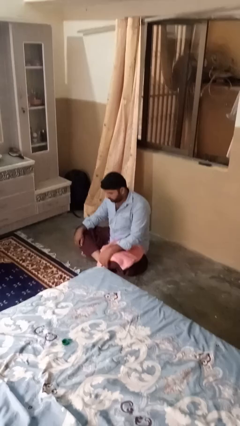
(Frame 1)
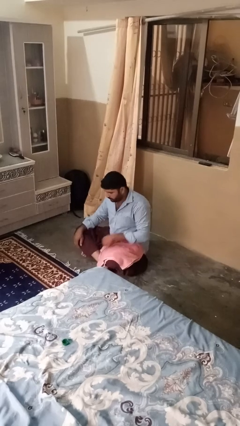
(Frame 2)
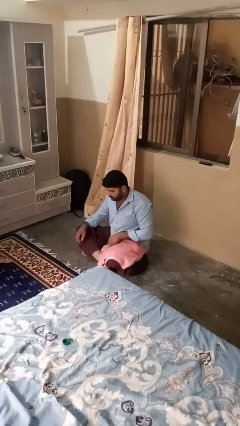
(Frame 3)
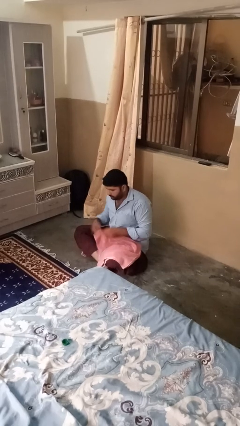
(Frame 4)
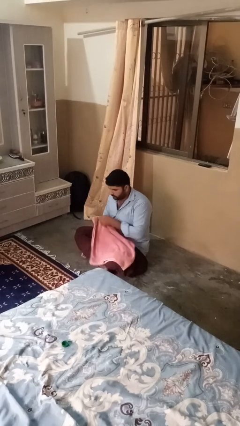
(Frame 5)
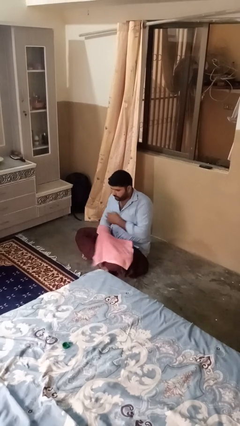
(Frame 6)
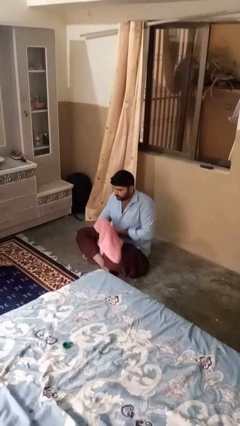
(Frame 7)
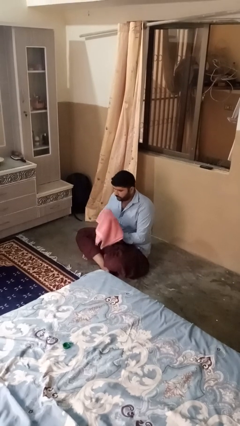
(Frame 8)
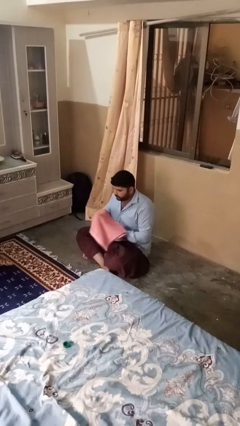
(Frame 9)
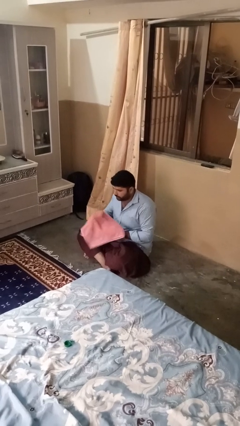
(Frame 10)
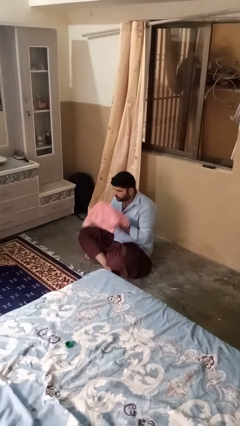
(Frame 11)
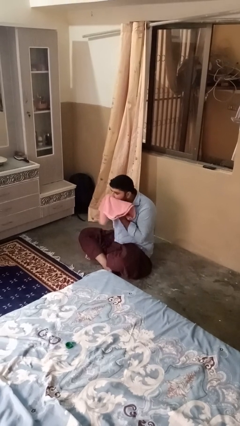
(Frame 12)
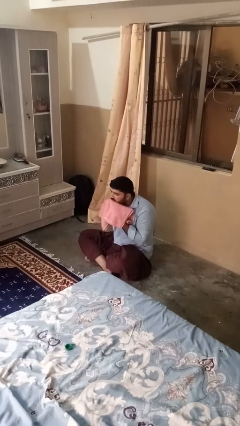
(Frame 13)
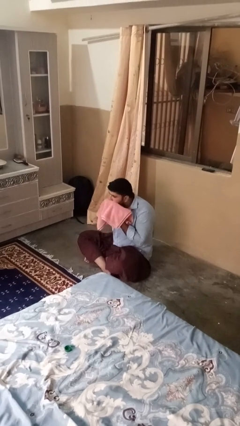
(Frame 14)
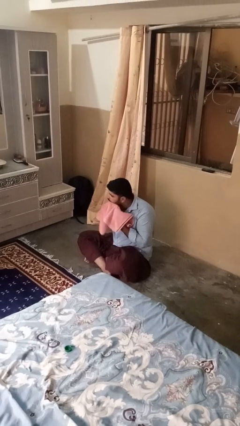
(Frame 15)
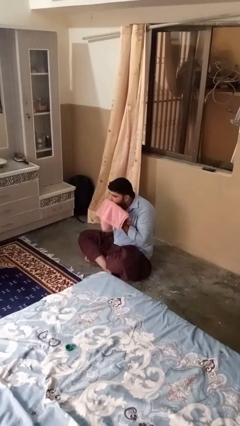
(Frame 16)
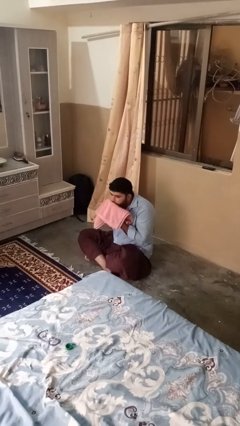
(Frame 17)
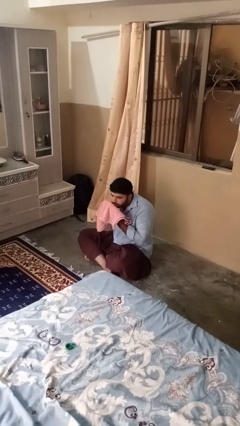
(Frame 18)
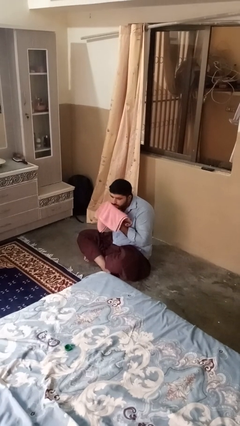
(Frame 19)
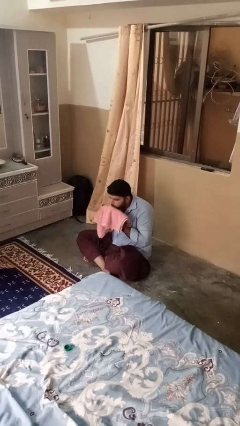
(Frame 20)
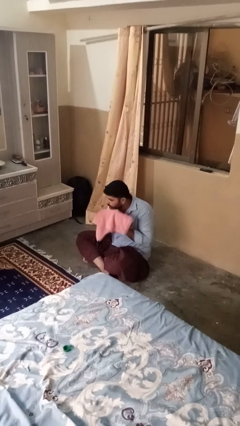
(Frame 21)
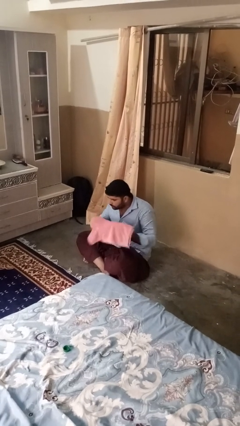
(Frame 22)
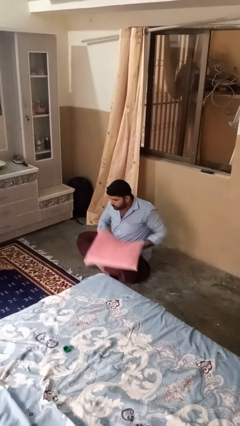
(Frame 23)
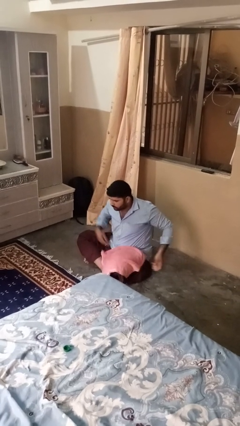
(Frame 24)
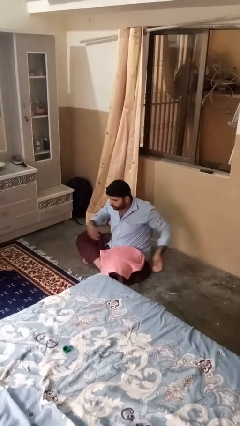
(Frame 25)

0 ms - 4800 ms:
person wipes mouth with napkin

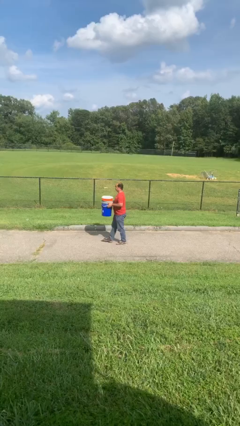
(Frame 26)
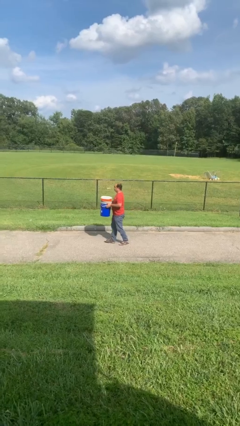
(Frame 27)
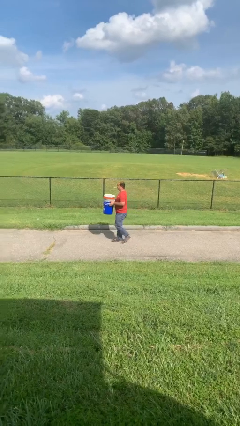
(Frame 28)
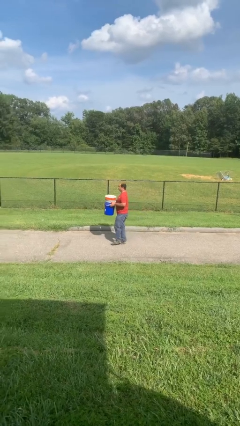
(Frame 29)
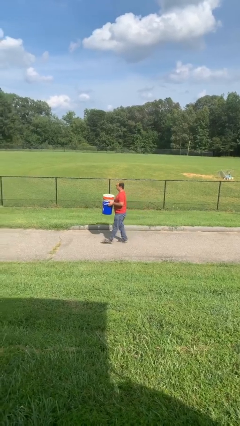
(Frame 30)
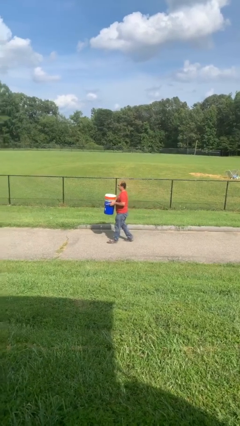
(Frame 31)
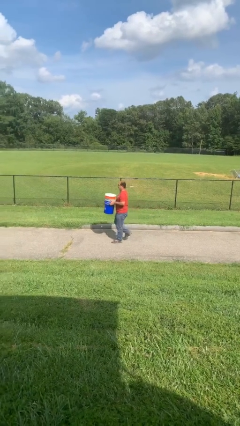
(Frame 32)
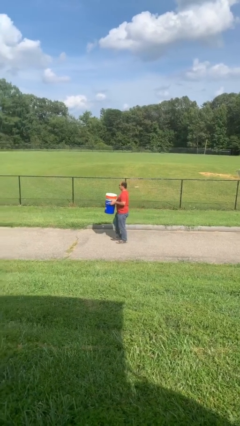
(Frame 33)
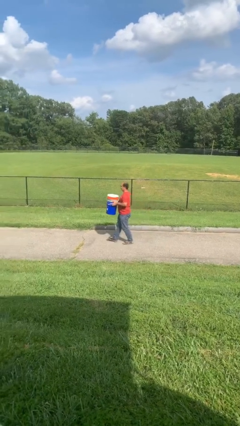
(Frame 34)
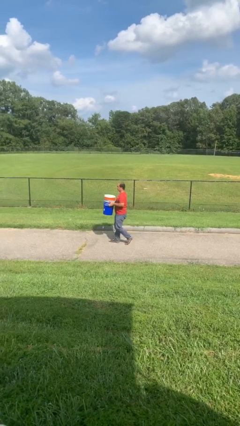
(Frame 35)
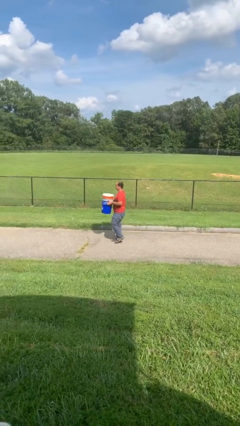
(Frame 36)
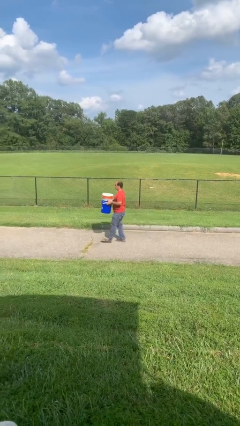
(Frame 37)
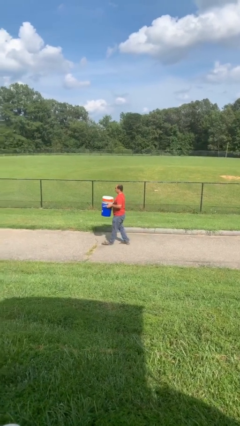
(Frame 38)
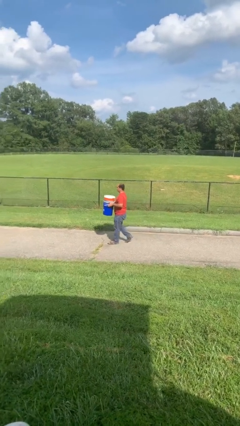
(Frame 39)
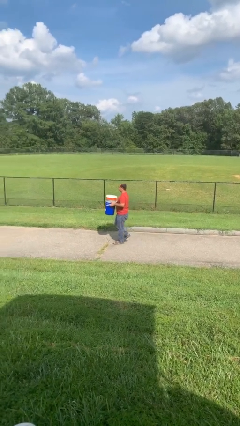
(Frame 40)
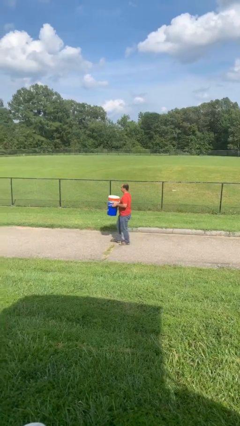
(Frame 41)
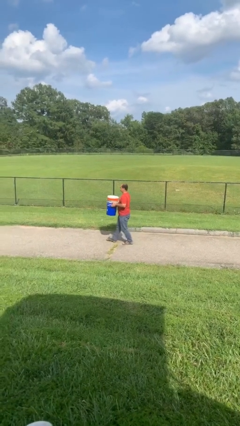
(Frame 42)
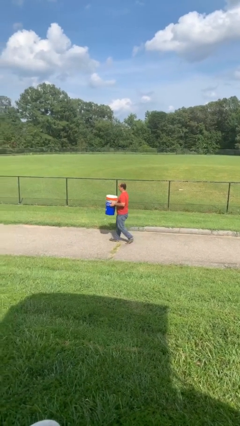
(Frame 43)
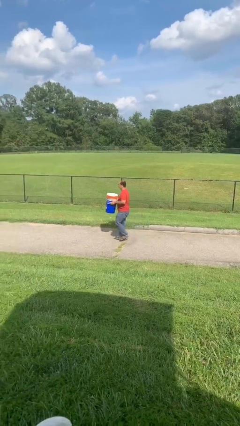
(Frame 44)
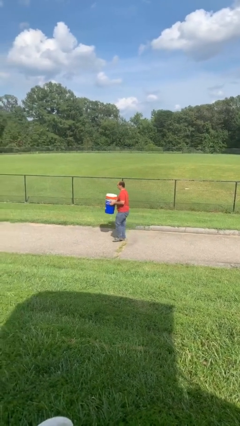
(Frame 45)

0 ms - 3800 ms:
person carries heavy object

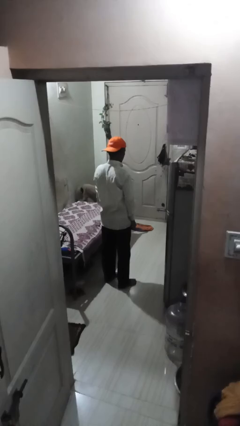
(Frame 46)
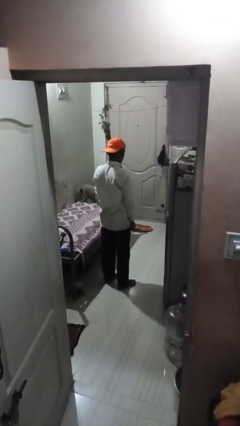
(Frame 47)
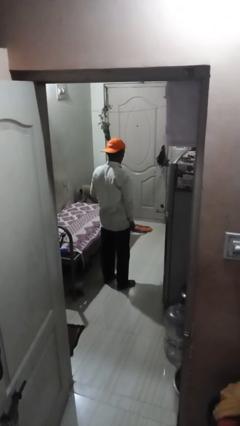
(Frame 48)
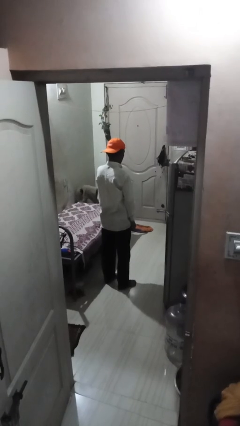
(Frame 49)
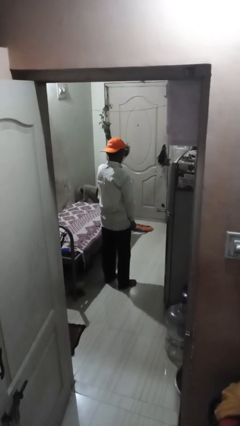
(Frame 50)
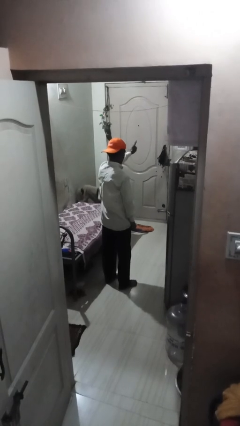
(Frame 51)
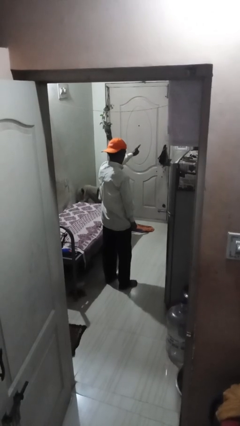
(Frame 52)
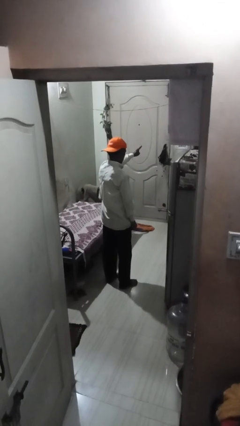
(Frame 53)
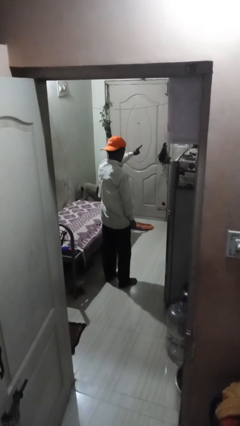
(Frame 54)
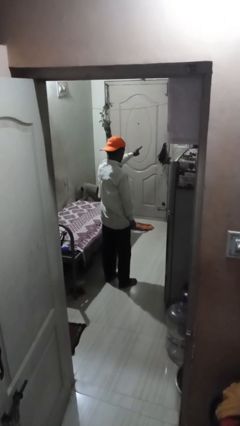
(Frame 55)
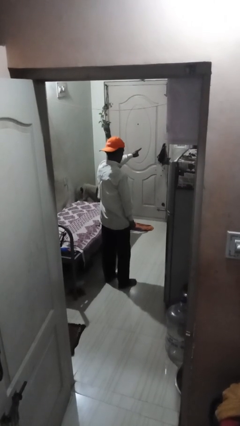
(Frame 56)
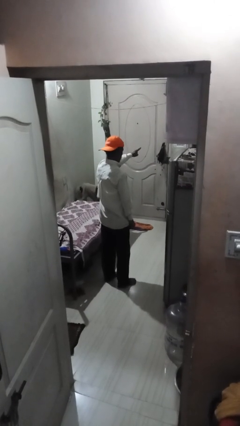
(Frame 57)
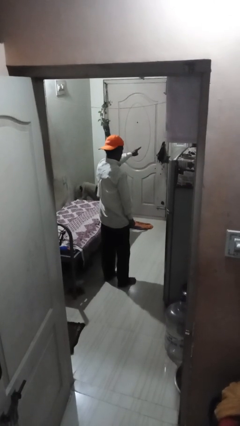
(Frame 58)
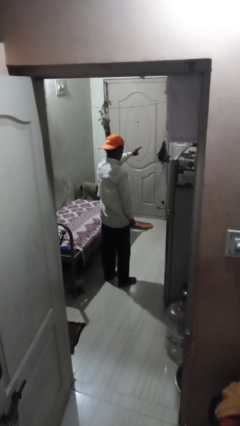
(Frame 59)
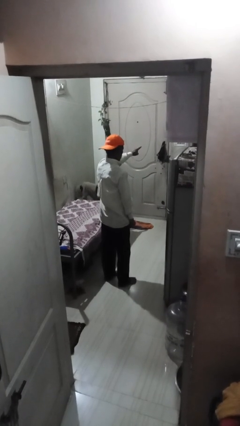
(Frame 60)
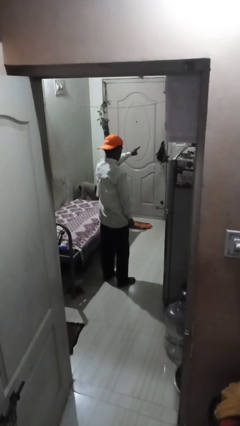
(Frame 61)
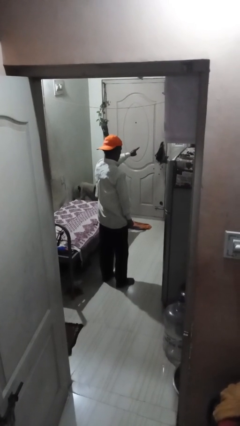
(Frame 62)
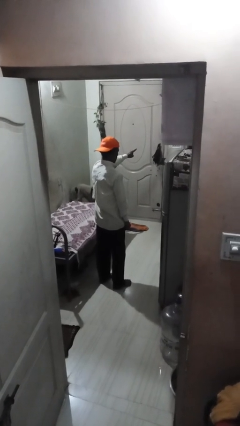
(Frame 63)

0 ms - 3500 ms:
person points at person

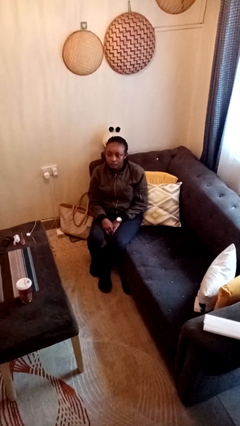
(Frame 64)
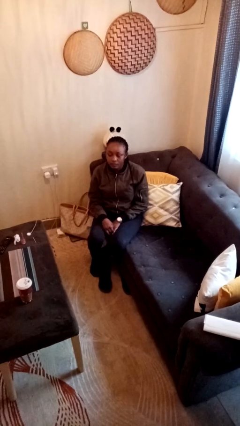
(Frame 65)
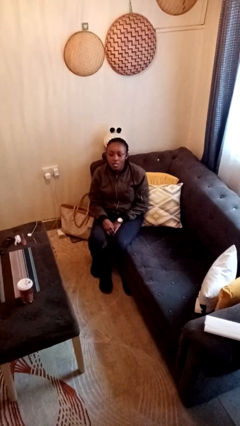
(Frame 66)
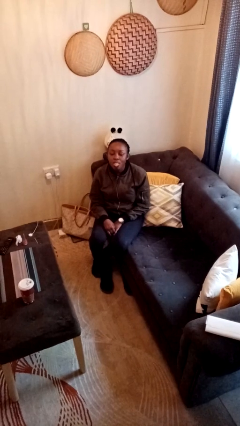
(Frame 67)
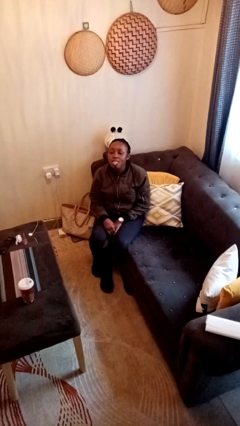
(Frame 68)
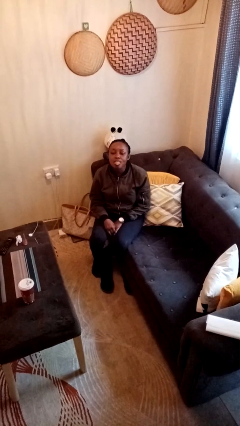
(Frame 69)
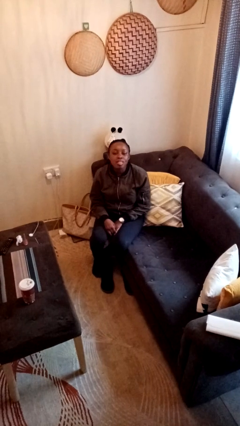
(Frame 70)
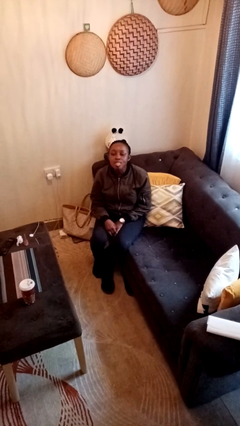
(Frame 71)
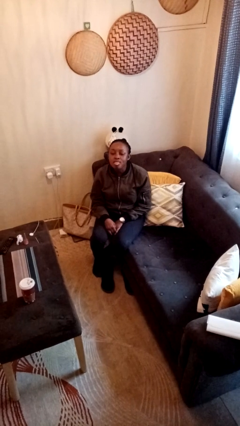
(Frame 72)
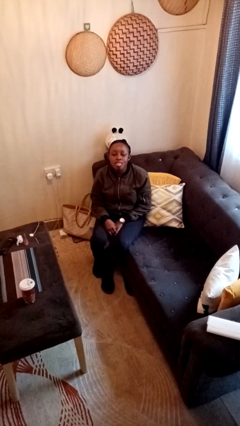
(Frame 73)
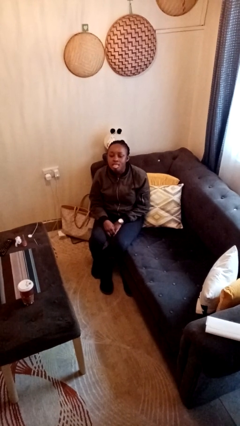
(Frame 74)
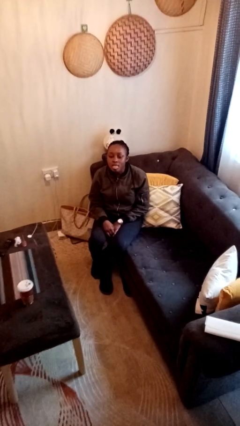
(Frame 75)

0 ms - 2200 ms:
person sticks out tongue

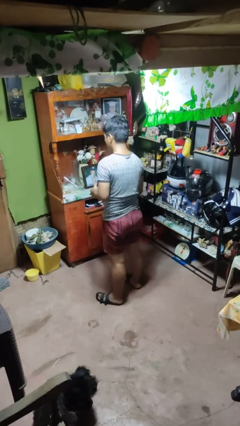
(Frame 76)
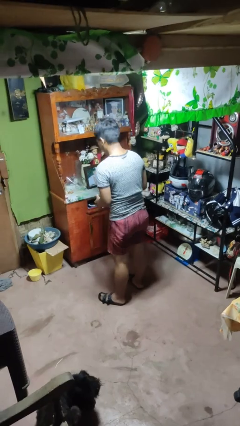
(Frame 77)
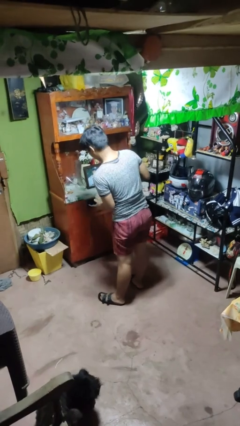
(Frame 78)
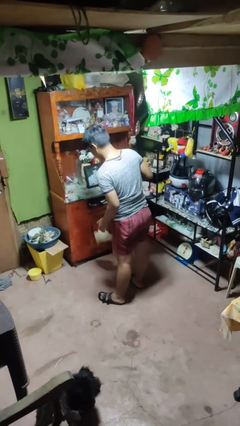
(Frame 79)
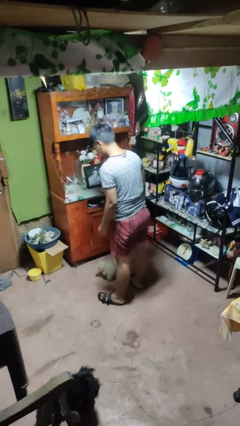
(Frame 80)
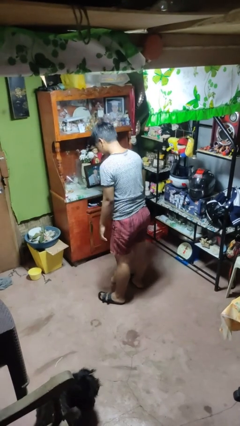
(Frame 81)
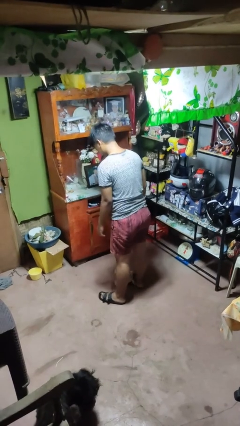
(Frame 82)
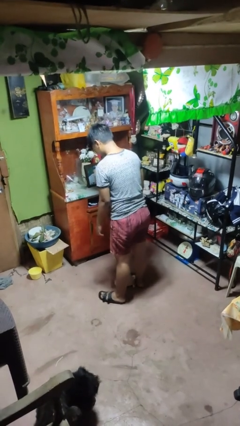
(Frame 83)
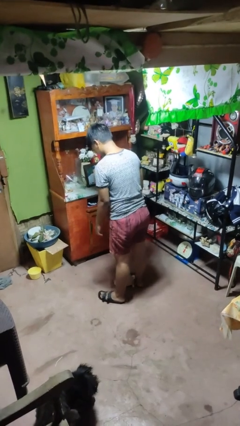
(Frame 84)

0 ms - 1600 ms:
person drops object

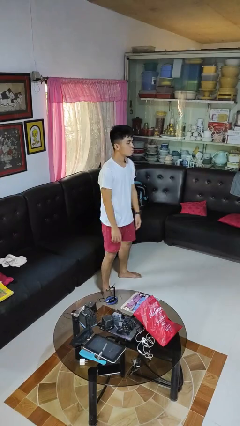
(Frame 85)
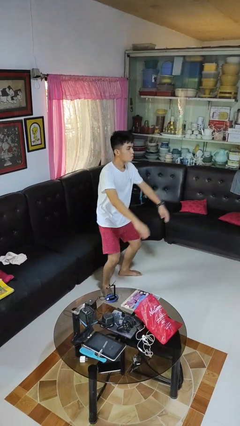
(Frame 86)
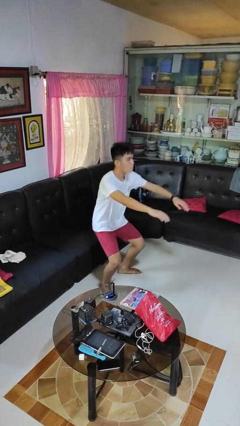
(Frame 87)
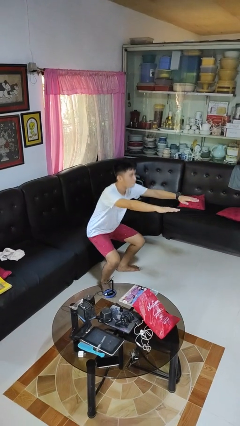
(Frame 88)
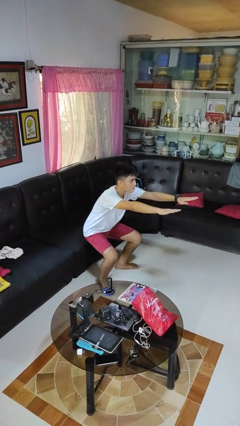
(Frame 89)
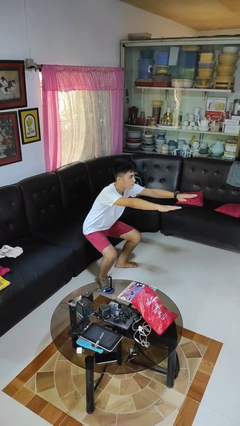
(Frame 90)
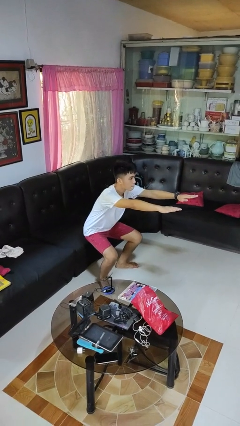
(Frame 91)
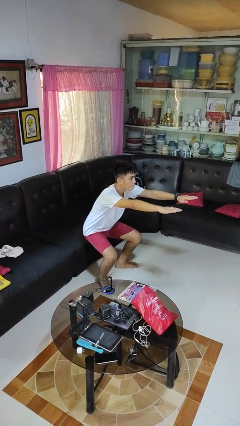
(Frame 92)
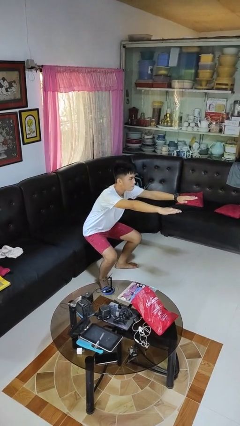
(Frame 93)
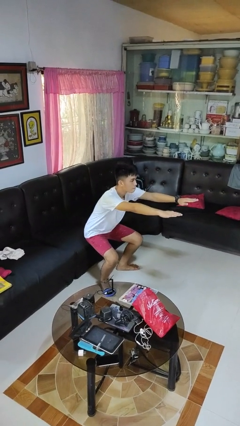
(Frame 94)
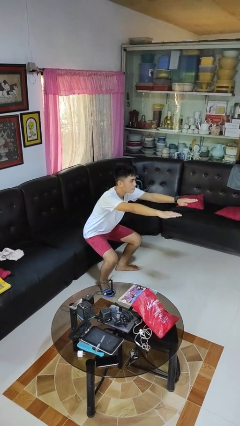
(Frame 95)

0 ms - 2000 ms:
person squats
